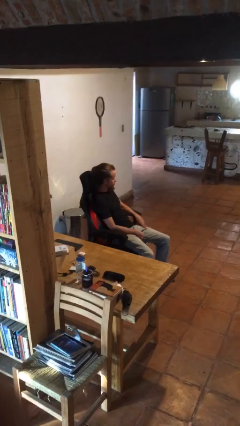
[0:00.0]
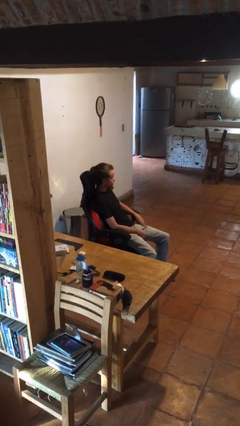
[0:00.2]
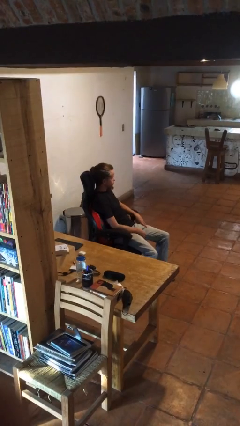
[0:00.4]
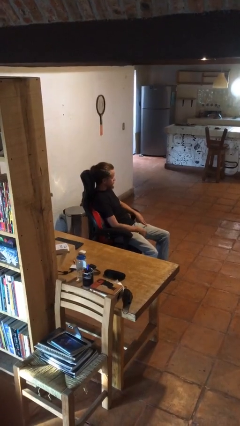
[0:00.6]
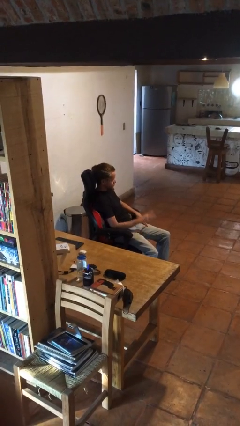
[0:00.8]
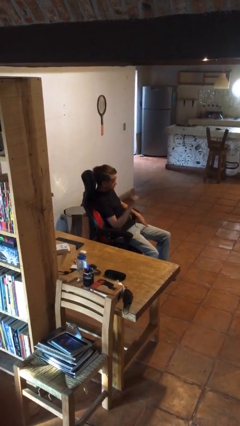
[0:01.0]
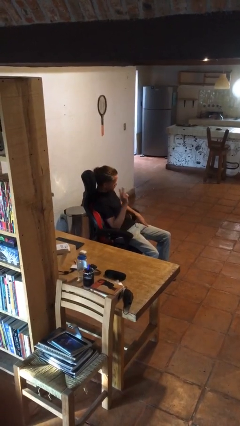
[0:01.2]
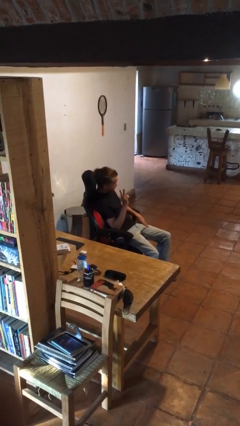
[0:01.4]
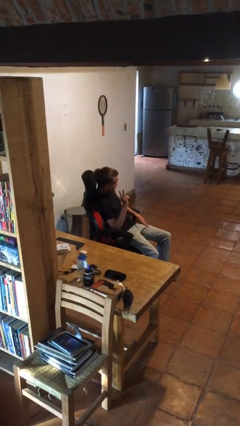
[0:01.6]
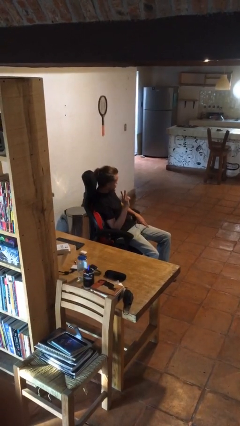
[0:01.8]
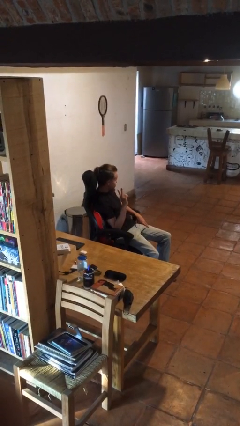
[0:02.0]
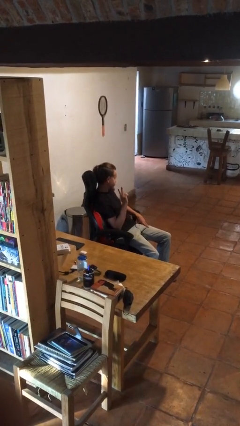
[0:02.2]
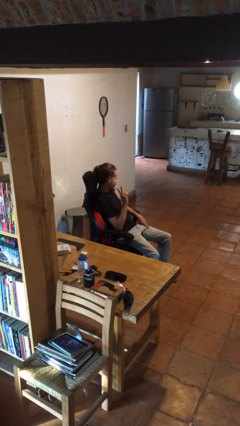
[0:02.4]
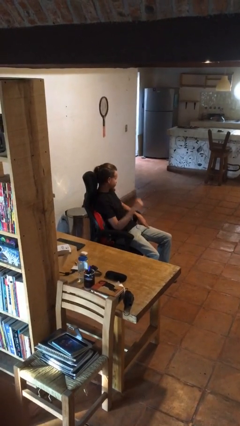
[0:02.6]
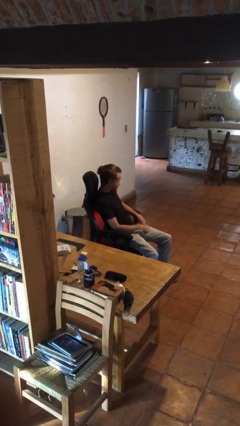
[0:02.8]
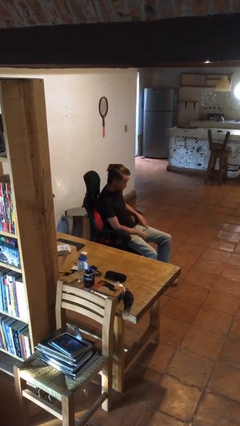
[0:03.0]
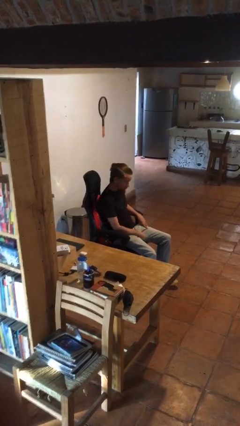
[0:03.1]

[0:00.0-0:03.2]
person gestures peace

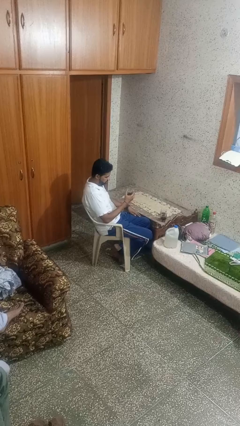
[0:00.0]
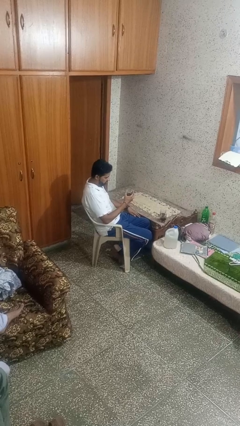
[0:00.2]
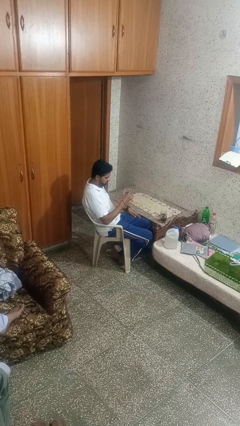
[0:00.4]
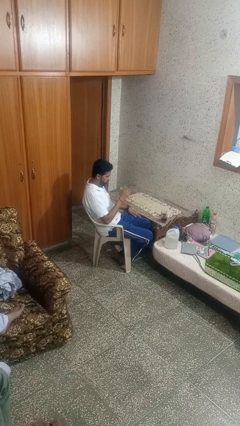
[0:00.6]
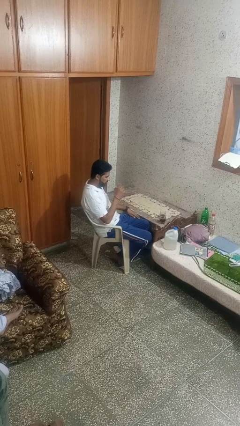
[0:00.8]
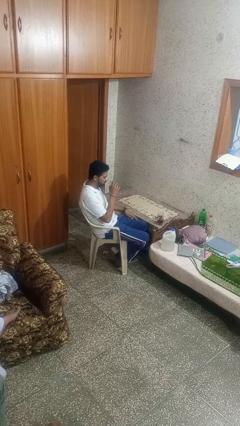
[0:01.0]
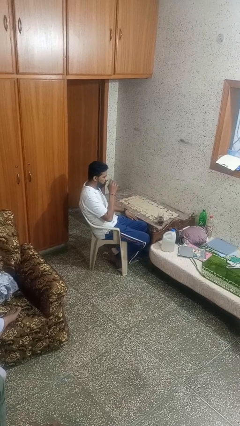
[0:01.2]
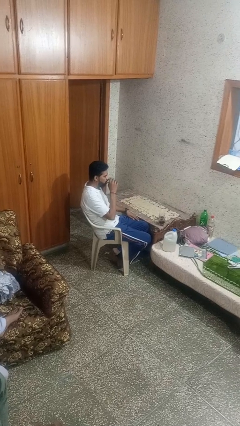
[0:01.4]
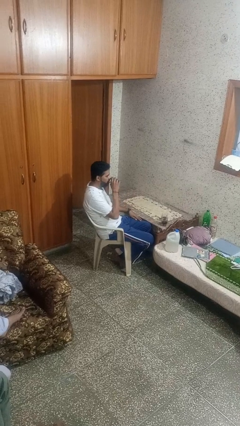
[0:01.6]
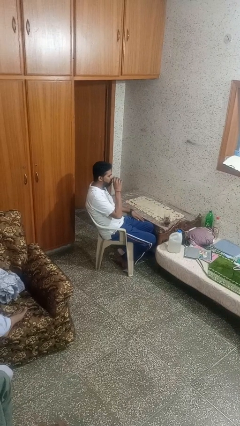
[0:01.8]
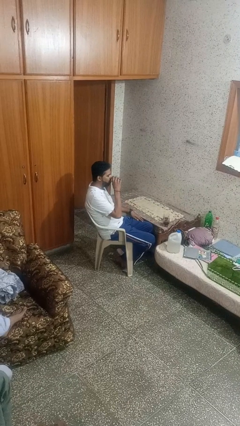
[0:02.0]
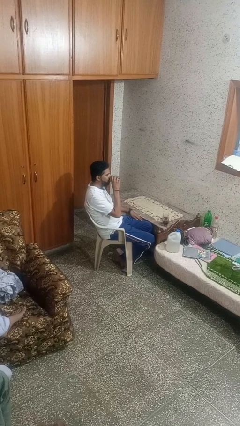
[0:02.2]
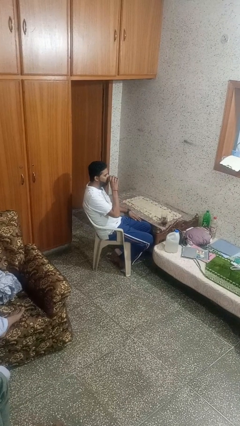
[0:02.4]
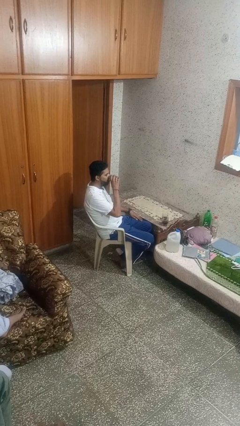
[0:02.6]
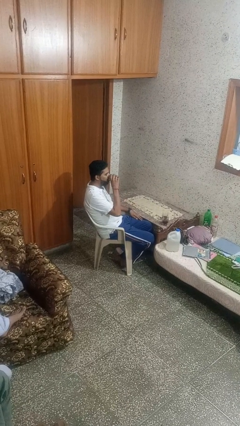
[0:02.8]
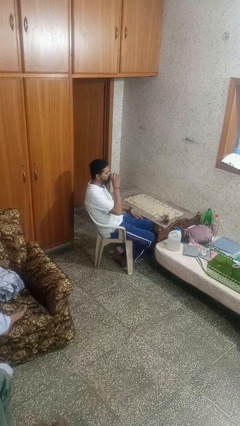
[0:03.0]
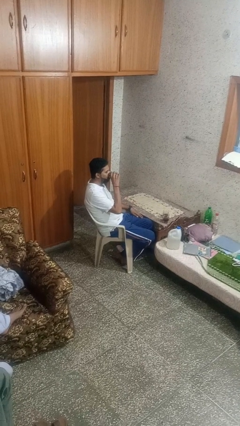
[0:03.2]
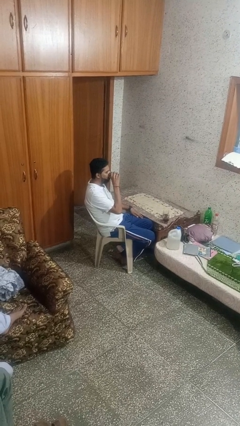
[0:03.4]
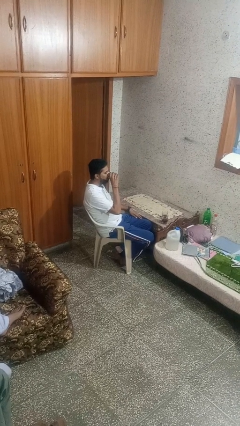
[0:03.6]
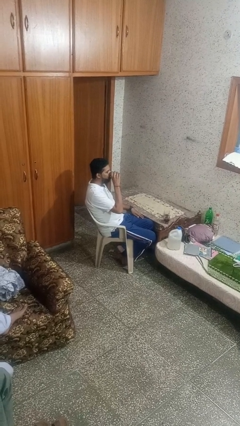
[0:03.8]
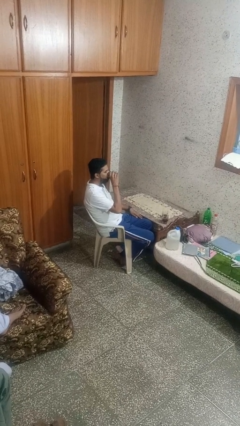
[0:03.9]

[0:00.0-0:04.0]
person drinks from shotglass

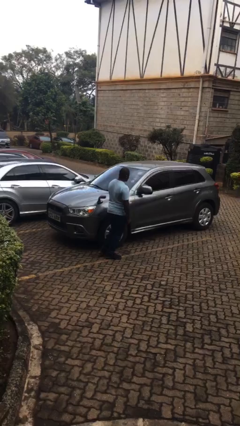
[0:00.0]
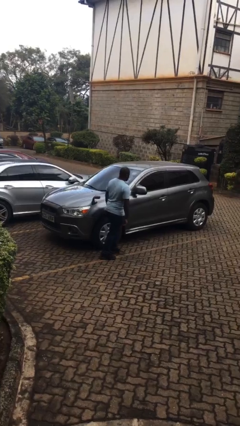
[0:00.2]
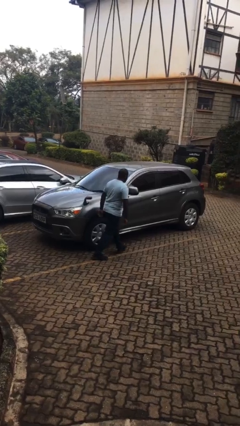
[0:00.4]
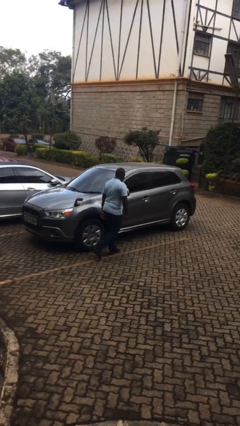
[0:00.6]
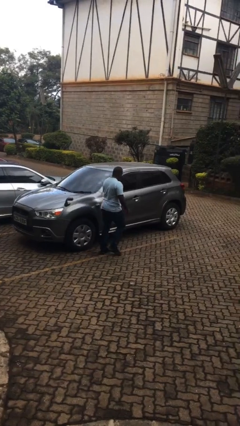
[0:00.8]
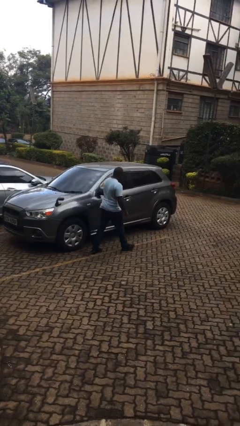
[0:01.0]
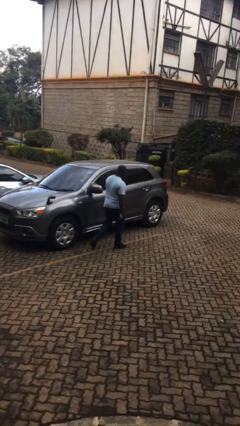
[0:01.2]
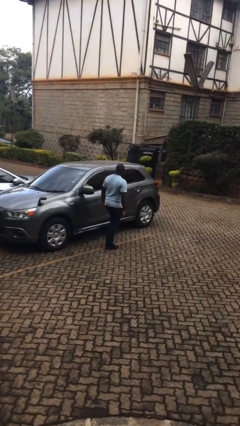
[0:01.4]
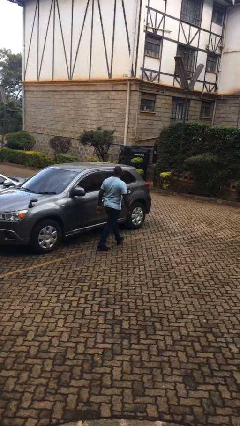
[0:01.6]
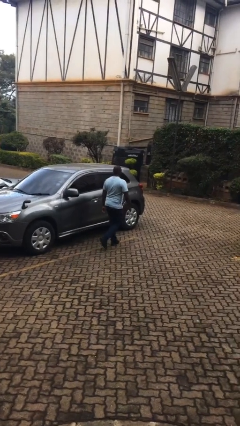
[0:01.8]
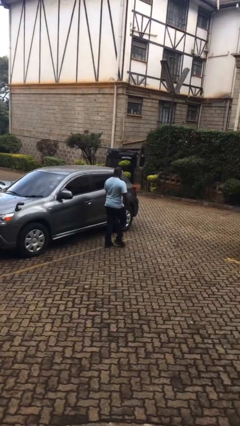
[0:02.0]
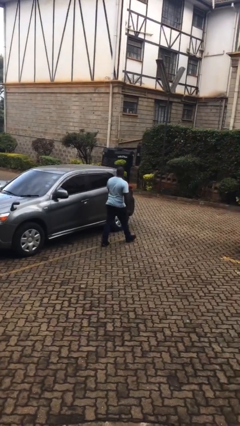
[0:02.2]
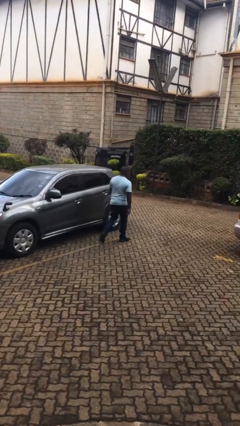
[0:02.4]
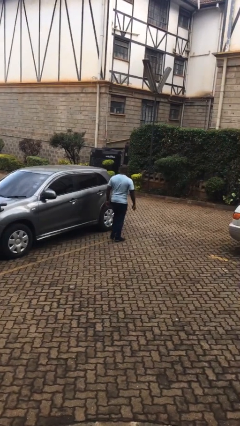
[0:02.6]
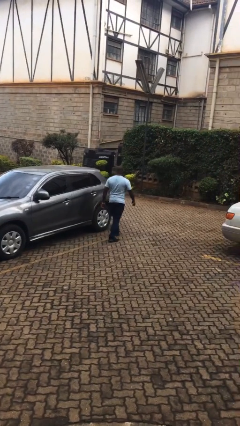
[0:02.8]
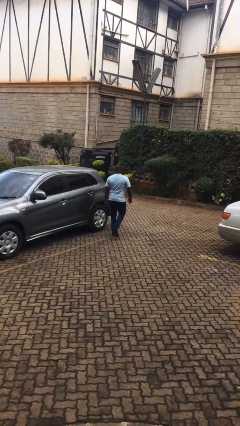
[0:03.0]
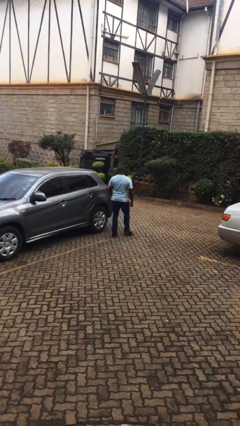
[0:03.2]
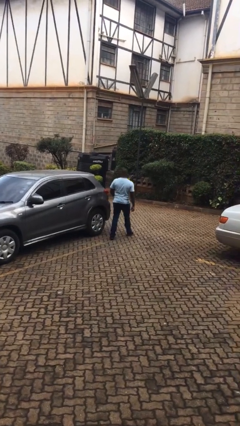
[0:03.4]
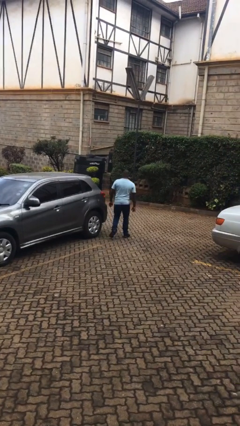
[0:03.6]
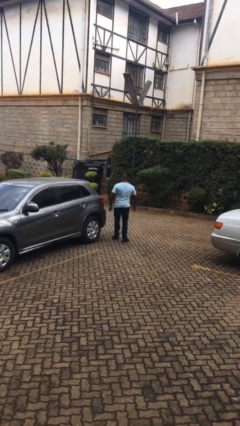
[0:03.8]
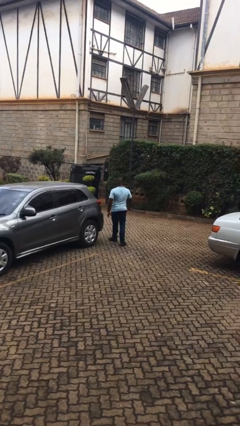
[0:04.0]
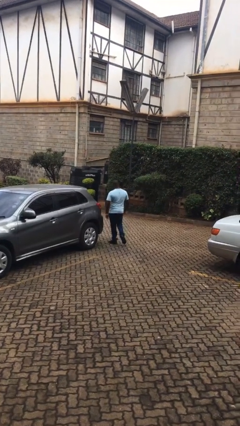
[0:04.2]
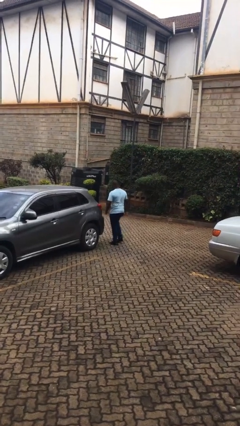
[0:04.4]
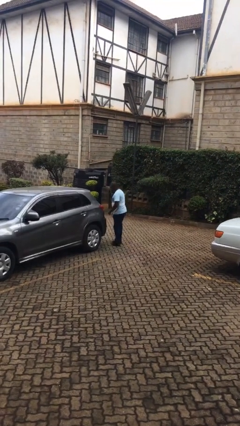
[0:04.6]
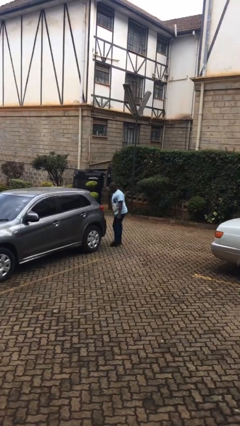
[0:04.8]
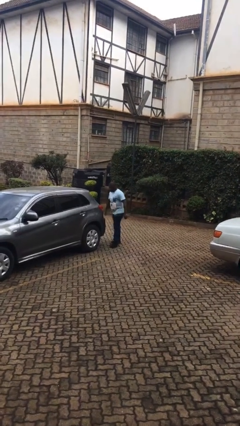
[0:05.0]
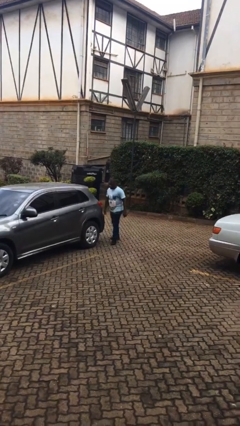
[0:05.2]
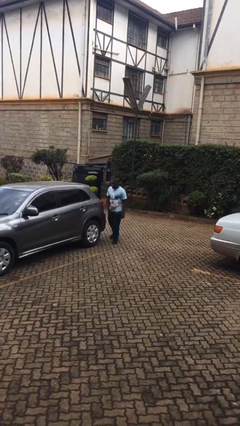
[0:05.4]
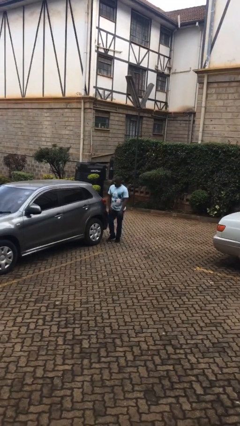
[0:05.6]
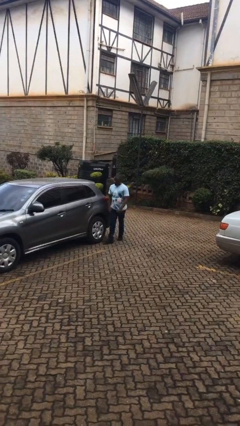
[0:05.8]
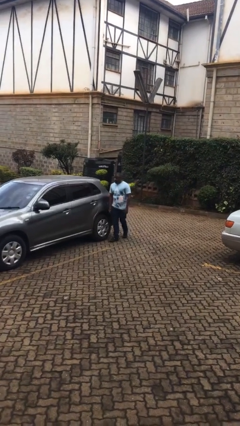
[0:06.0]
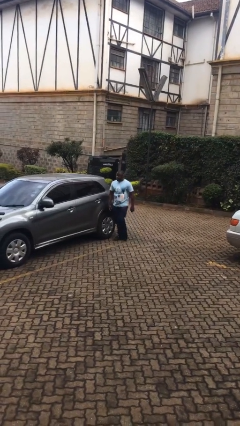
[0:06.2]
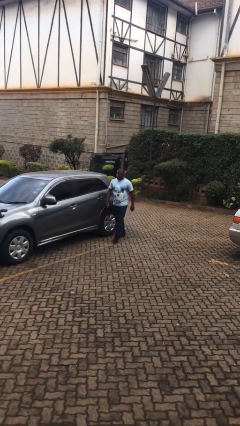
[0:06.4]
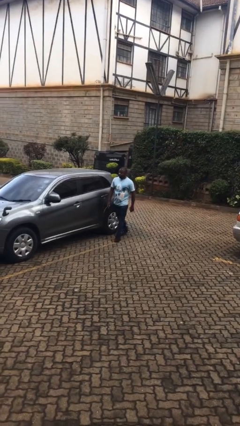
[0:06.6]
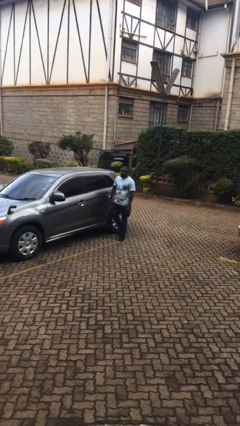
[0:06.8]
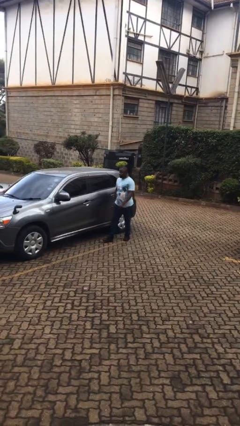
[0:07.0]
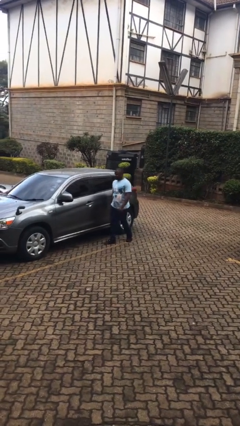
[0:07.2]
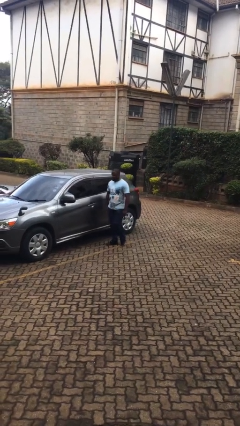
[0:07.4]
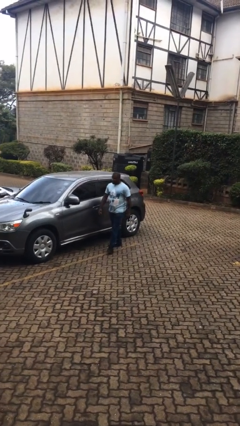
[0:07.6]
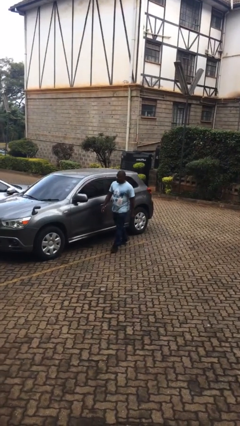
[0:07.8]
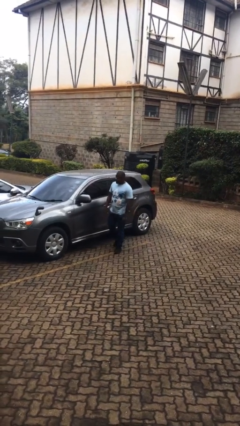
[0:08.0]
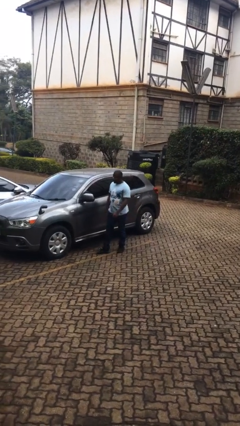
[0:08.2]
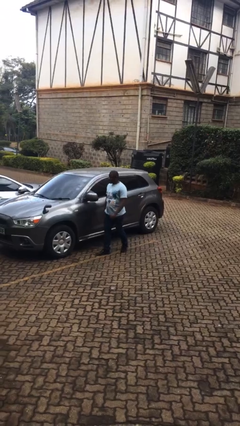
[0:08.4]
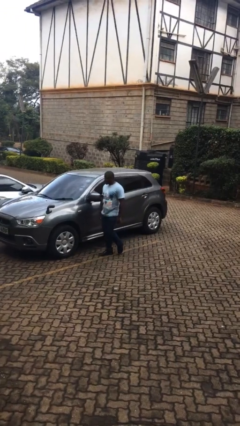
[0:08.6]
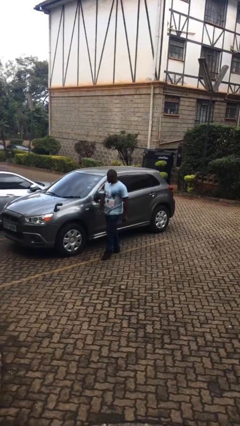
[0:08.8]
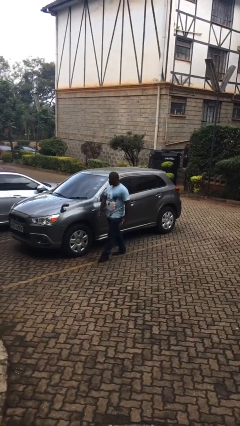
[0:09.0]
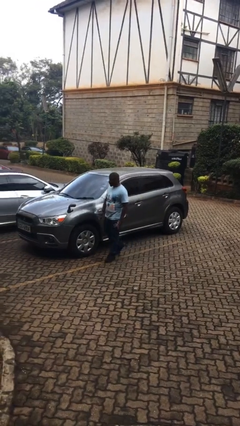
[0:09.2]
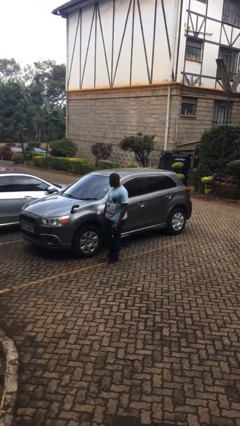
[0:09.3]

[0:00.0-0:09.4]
person walks around car

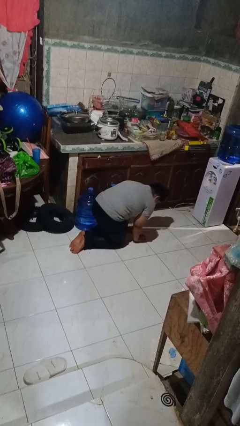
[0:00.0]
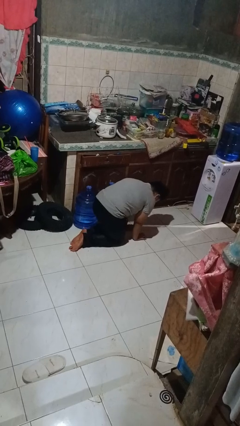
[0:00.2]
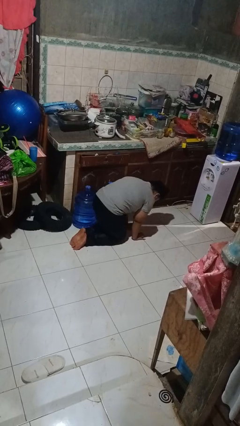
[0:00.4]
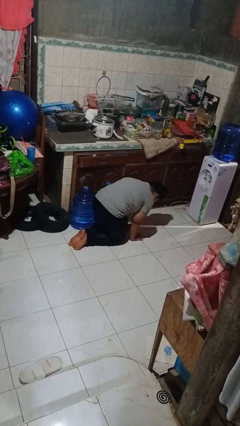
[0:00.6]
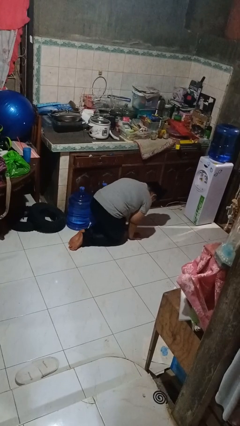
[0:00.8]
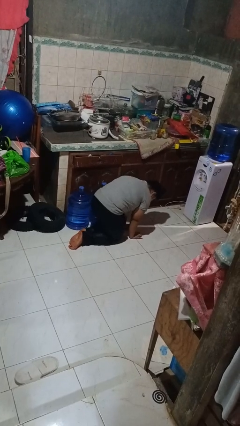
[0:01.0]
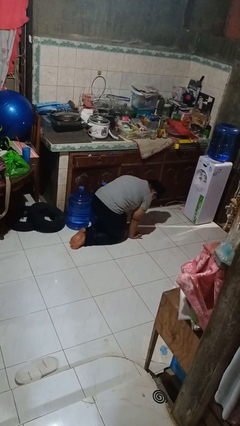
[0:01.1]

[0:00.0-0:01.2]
person crawls
